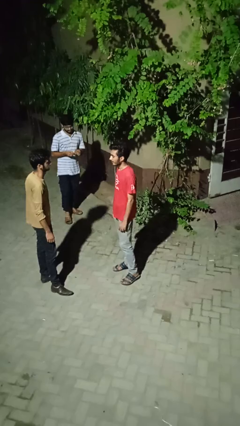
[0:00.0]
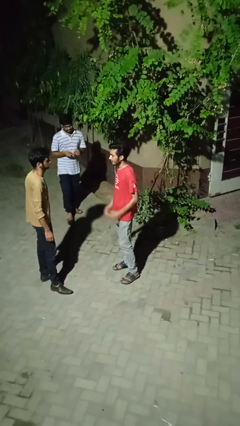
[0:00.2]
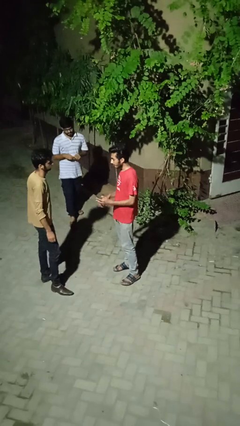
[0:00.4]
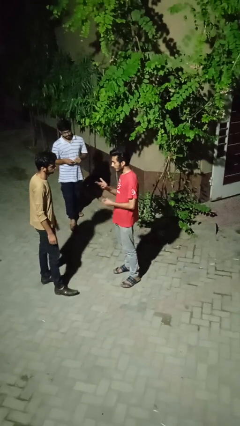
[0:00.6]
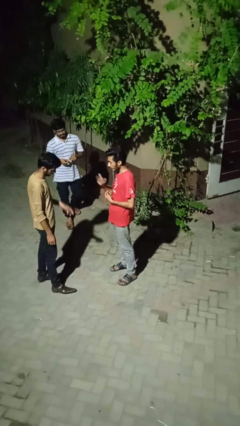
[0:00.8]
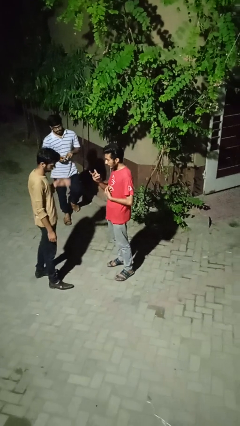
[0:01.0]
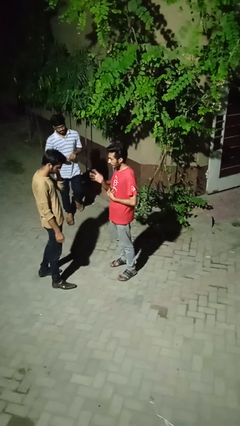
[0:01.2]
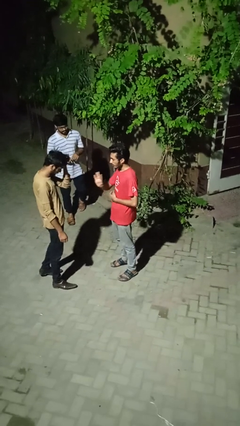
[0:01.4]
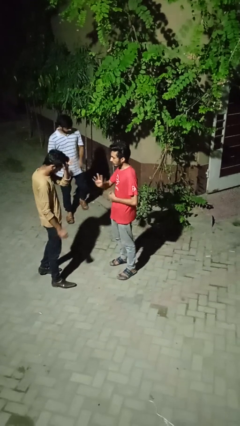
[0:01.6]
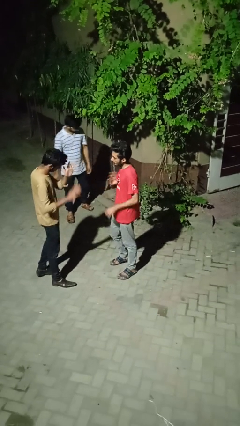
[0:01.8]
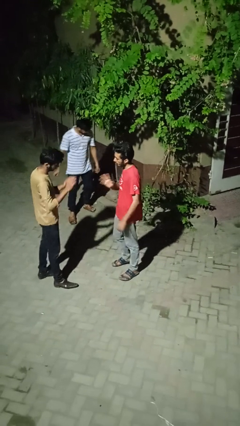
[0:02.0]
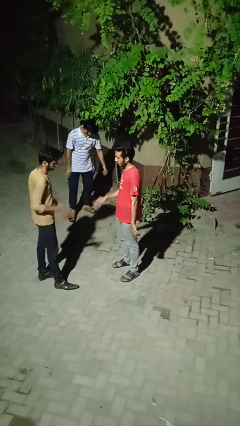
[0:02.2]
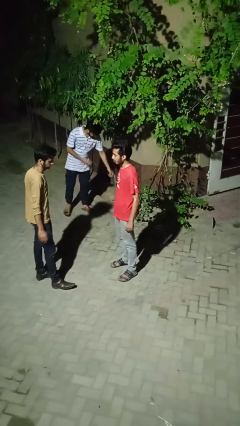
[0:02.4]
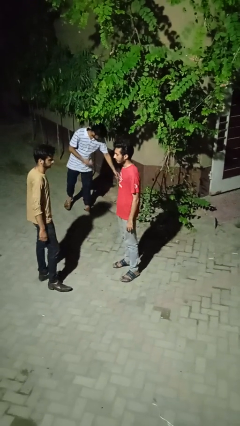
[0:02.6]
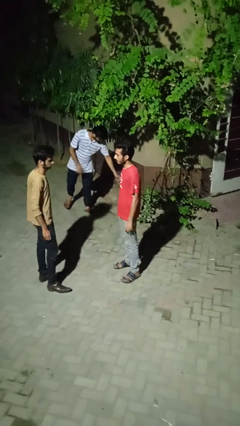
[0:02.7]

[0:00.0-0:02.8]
person talks to person

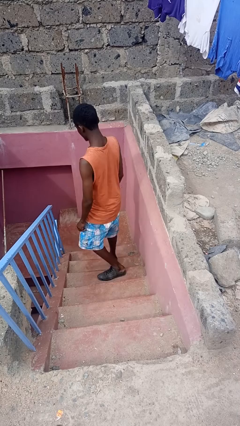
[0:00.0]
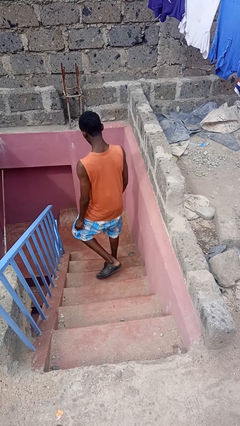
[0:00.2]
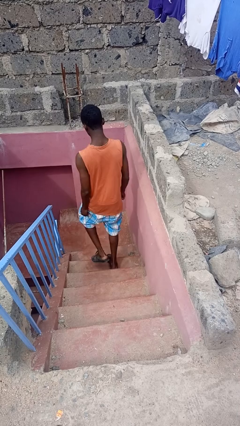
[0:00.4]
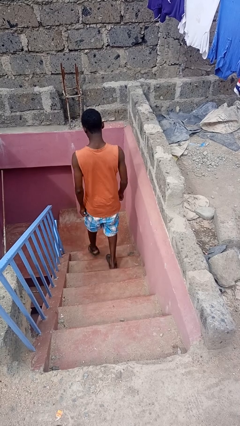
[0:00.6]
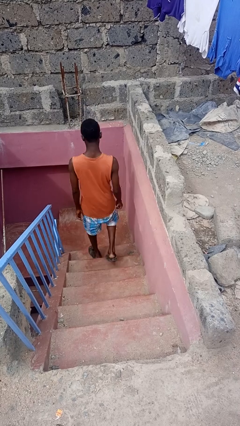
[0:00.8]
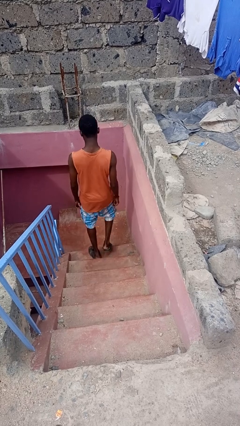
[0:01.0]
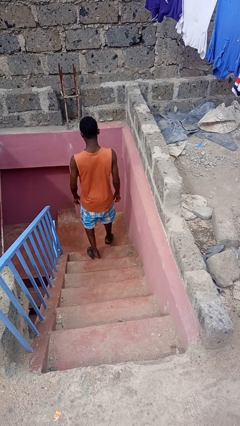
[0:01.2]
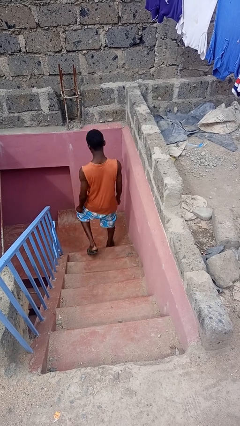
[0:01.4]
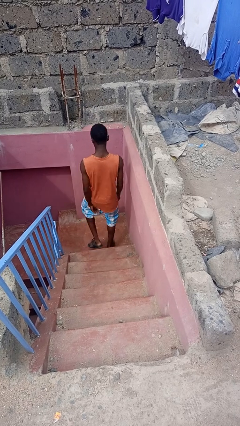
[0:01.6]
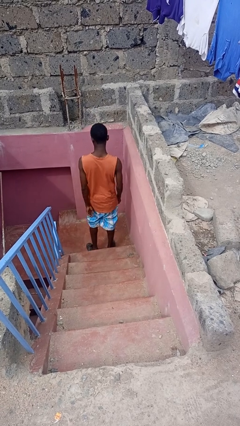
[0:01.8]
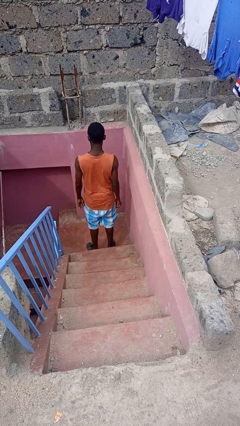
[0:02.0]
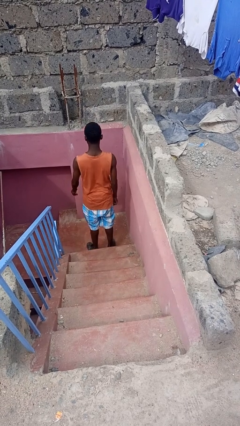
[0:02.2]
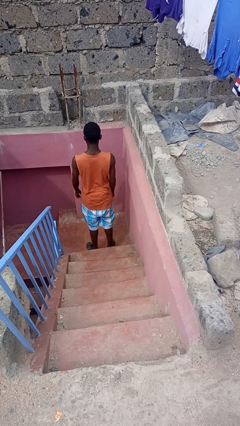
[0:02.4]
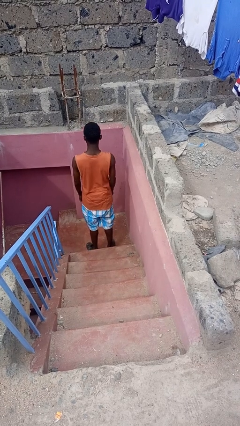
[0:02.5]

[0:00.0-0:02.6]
person climbs down stairs

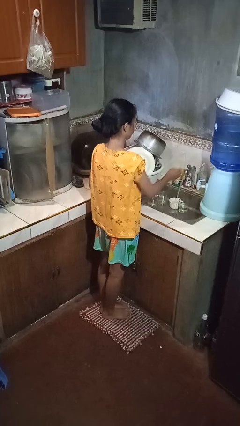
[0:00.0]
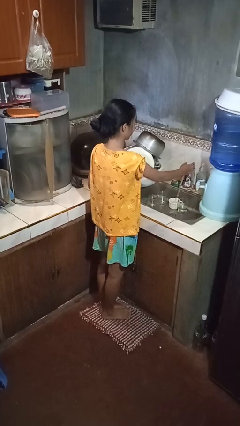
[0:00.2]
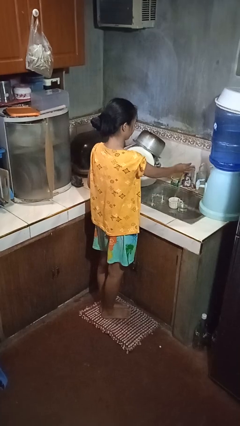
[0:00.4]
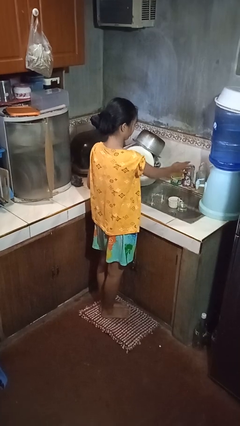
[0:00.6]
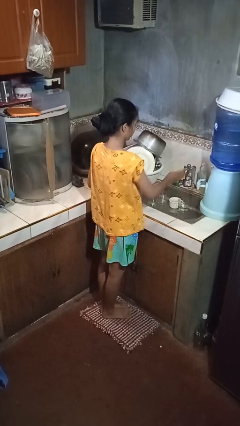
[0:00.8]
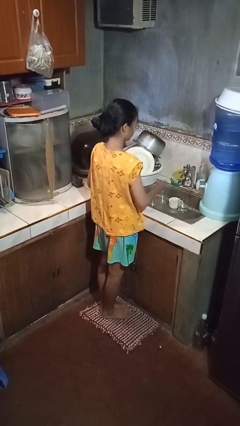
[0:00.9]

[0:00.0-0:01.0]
person turns off faucet

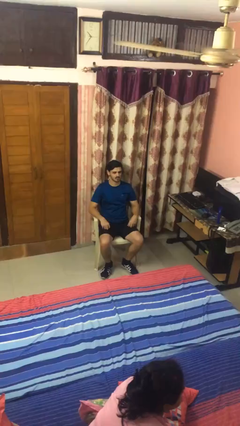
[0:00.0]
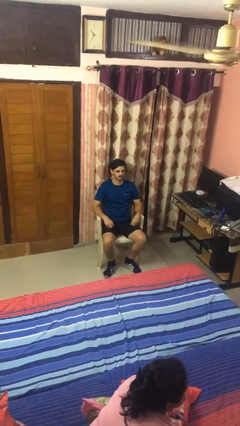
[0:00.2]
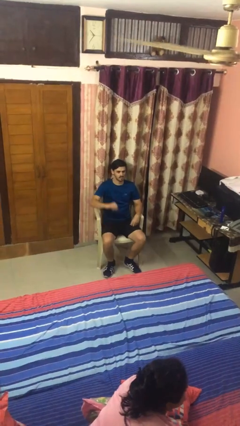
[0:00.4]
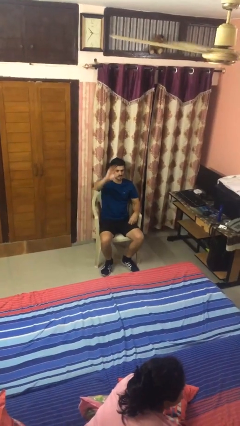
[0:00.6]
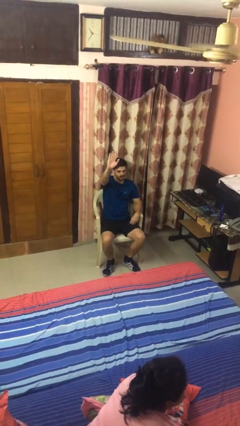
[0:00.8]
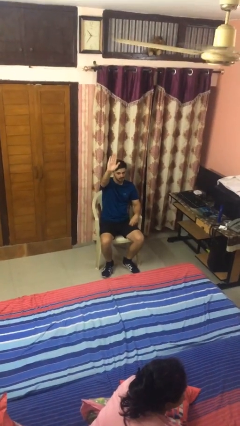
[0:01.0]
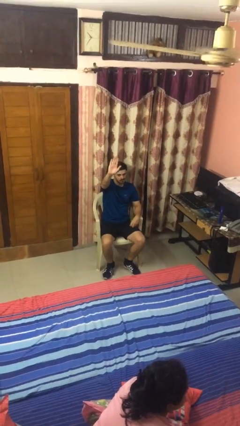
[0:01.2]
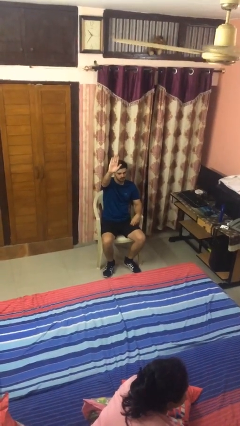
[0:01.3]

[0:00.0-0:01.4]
person gestures raise hand

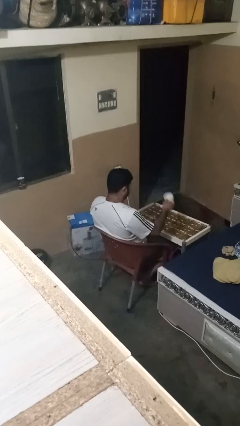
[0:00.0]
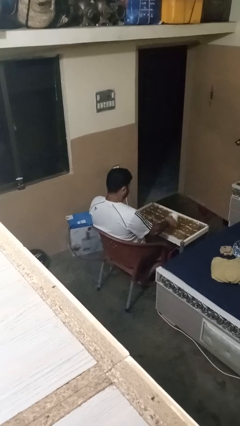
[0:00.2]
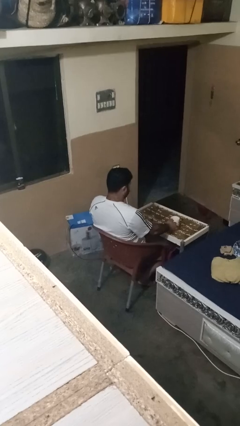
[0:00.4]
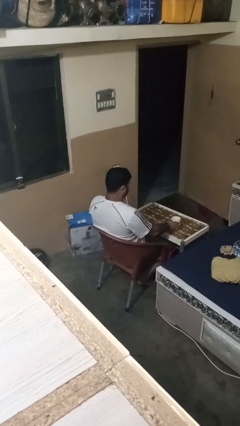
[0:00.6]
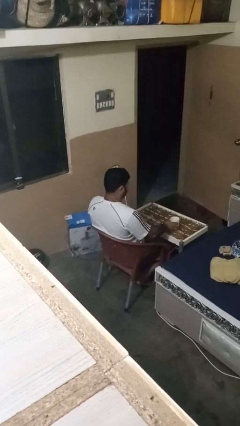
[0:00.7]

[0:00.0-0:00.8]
person puts down object on table

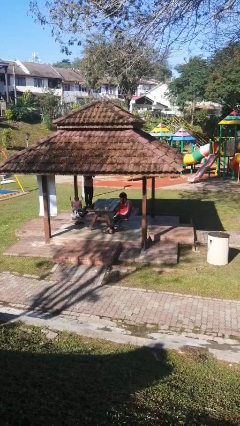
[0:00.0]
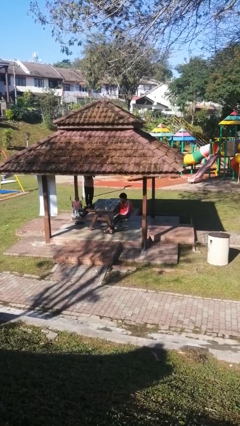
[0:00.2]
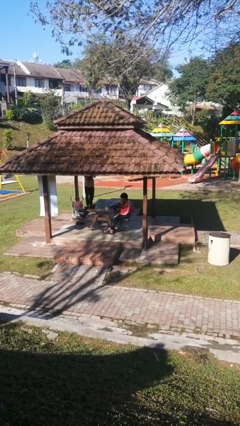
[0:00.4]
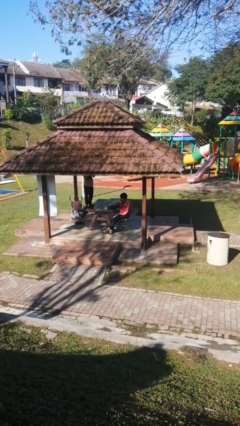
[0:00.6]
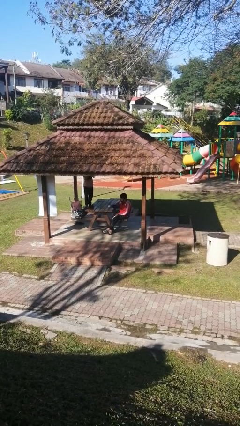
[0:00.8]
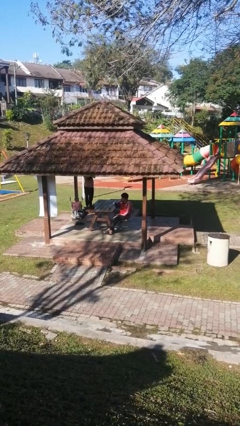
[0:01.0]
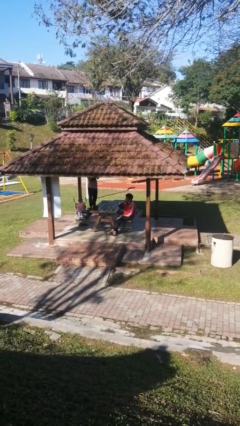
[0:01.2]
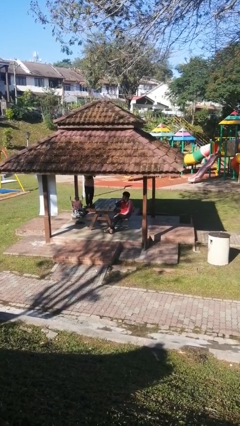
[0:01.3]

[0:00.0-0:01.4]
person picks up object from table

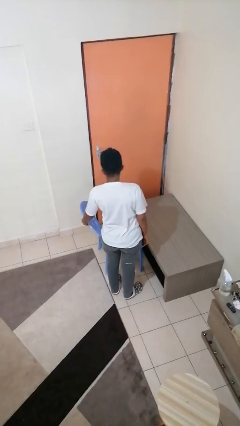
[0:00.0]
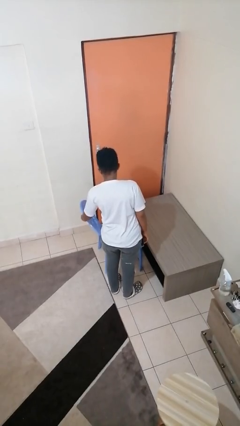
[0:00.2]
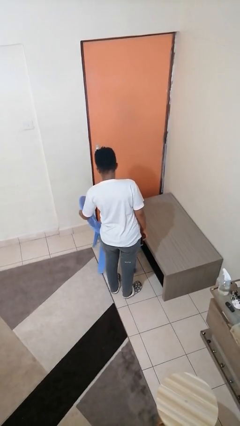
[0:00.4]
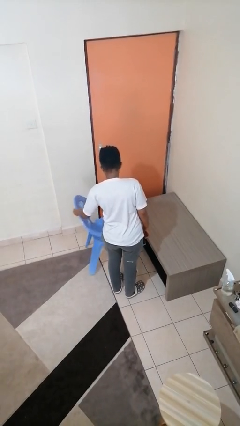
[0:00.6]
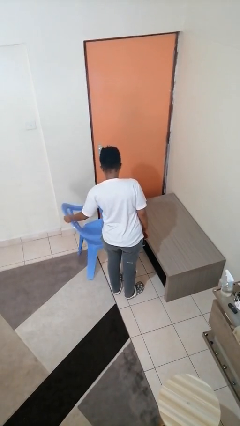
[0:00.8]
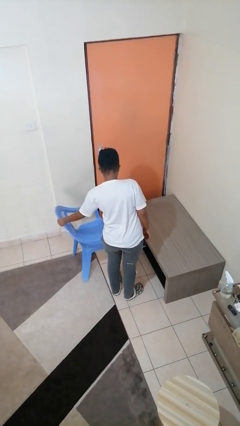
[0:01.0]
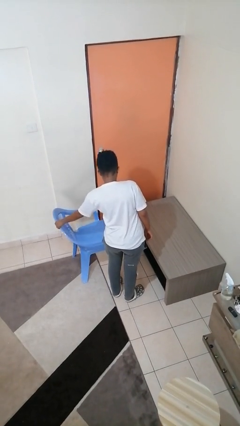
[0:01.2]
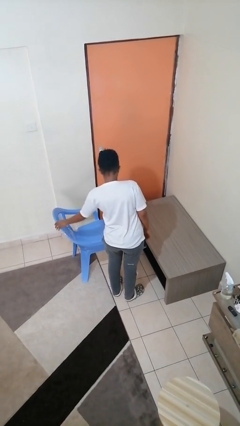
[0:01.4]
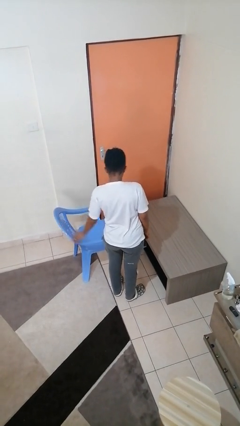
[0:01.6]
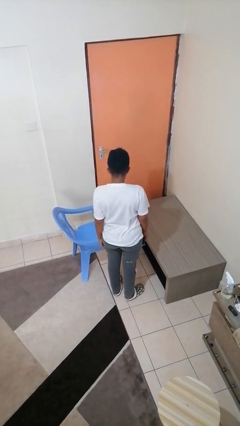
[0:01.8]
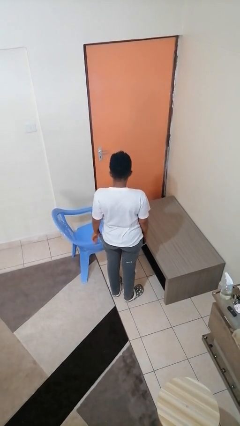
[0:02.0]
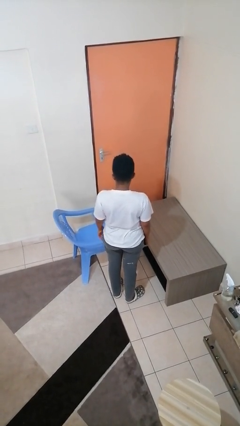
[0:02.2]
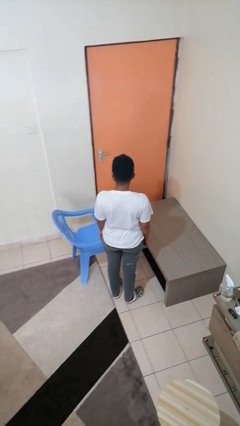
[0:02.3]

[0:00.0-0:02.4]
person pulls out chair

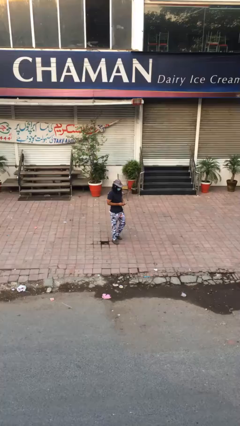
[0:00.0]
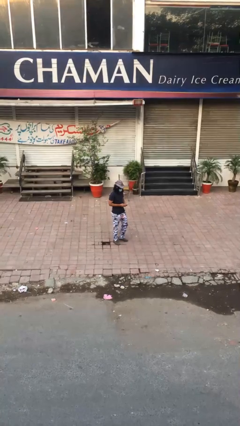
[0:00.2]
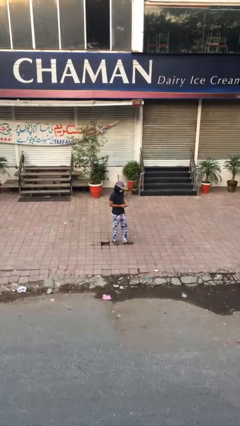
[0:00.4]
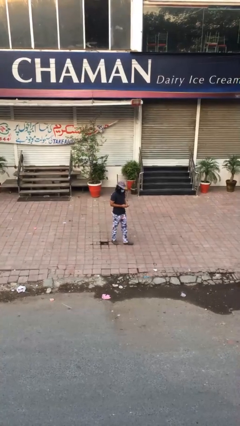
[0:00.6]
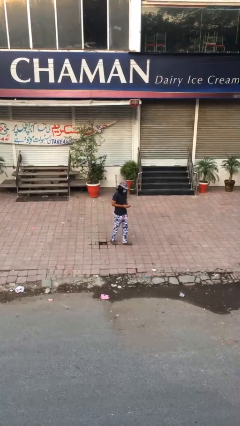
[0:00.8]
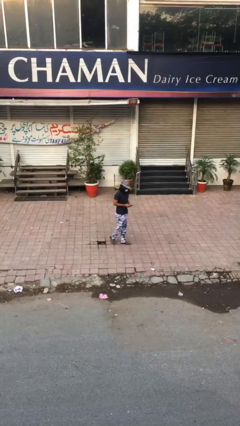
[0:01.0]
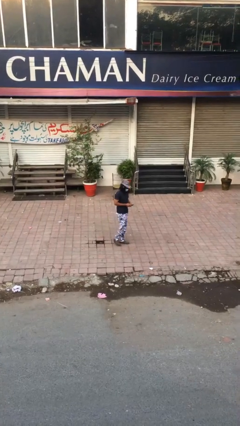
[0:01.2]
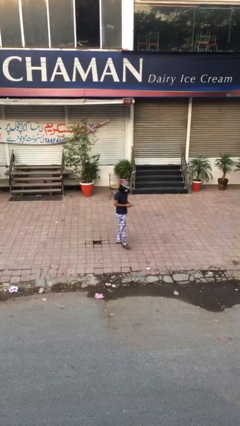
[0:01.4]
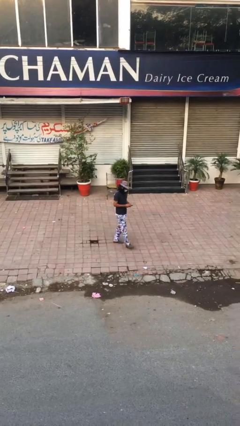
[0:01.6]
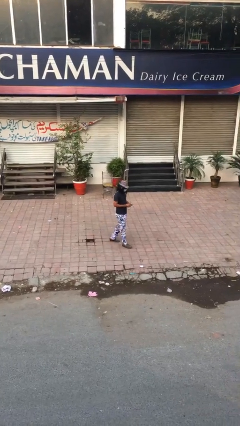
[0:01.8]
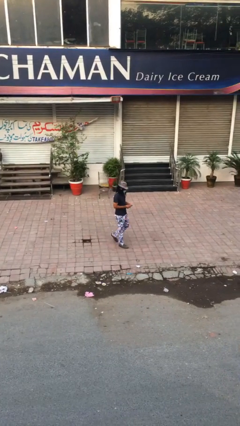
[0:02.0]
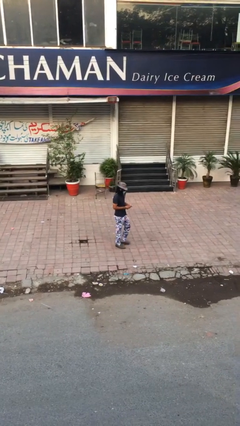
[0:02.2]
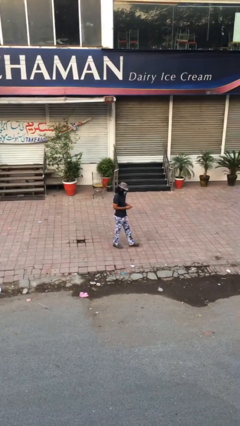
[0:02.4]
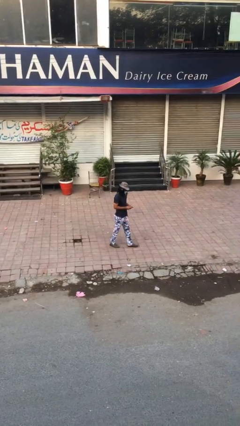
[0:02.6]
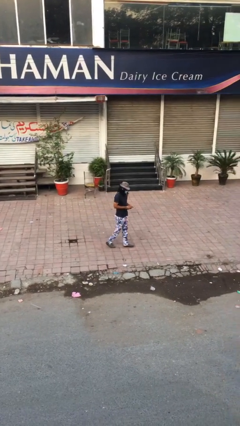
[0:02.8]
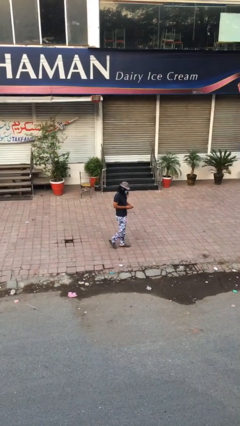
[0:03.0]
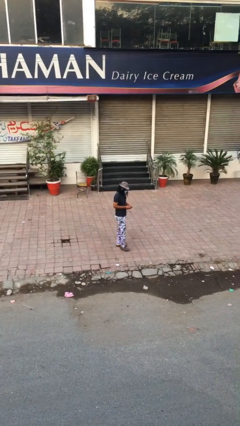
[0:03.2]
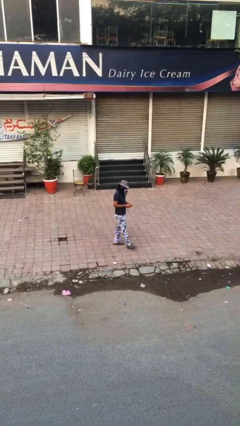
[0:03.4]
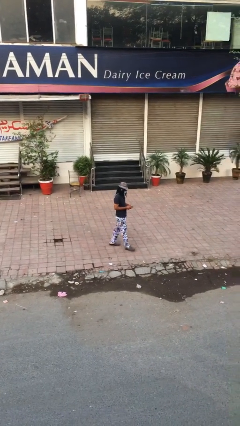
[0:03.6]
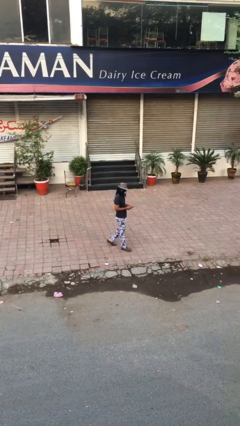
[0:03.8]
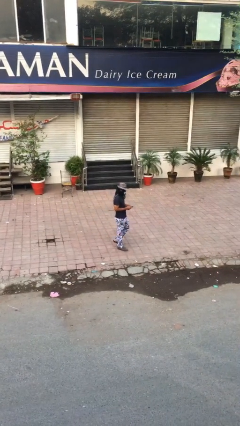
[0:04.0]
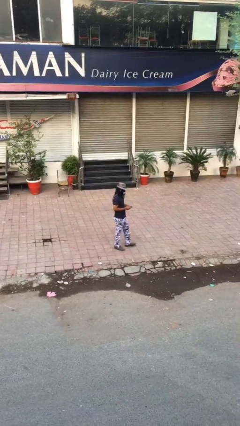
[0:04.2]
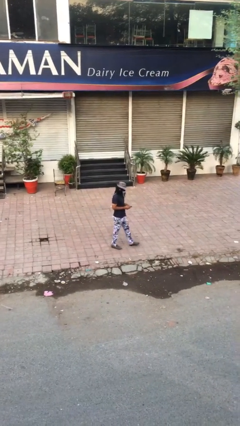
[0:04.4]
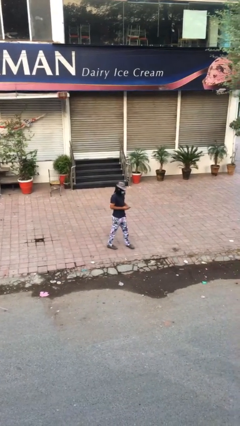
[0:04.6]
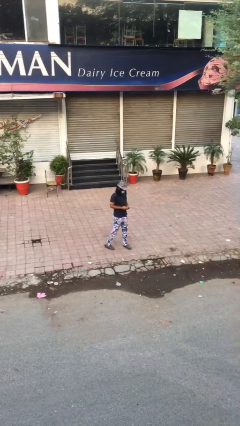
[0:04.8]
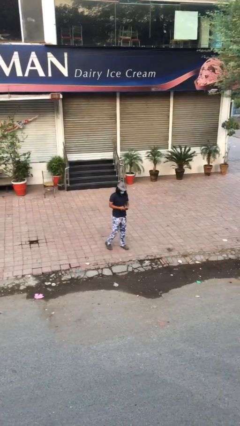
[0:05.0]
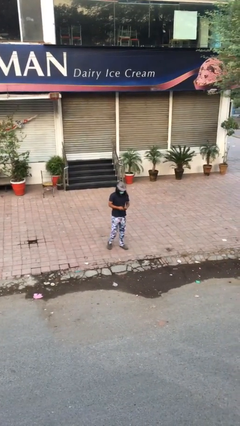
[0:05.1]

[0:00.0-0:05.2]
person texts on phone
